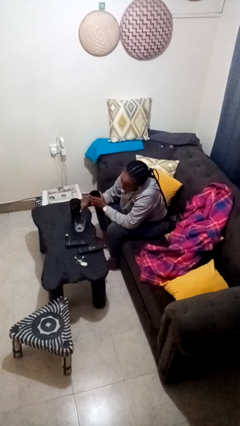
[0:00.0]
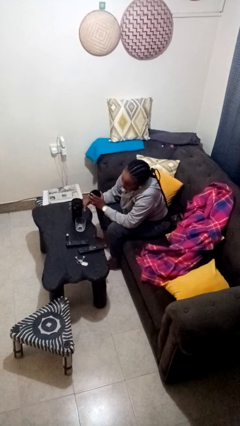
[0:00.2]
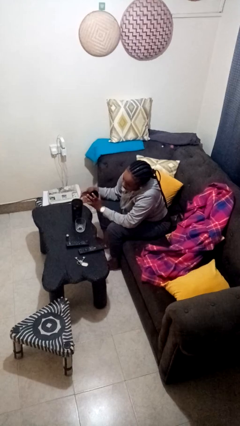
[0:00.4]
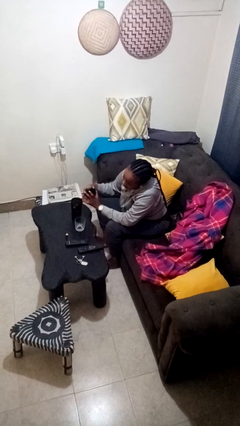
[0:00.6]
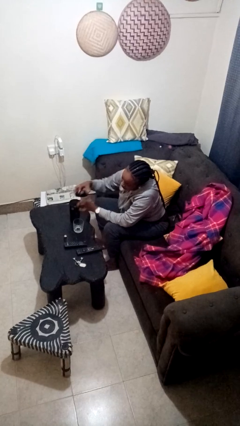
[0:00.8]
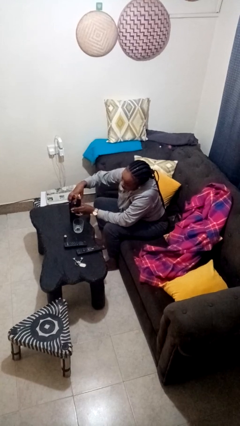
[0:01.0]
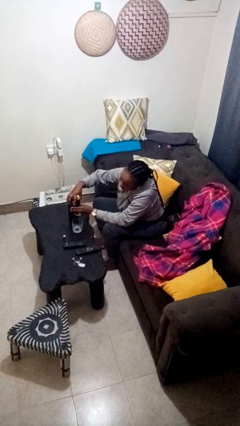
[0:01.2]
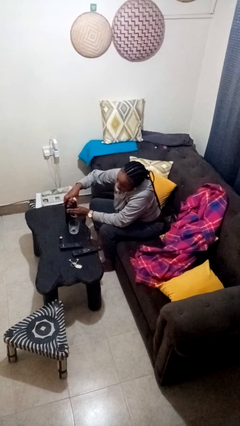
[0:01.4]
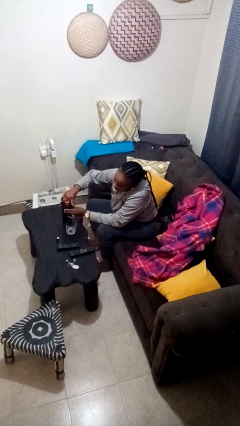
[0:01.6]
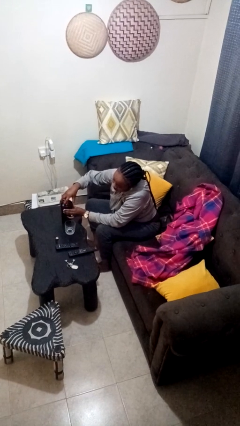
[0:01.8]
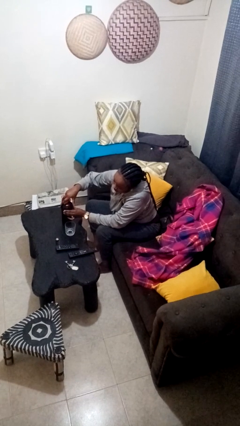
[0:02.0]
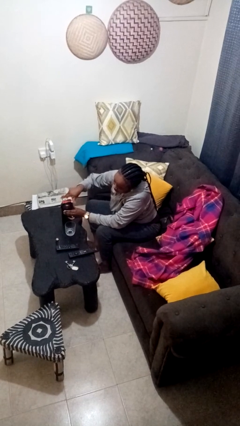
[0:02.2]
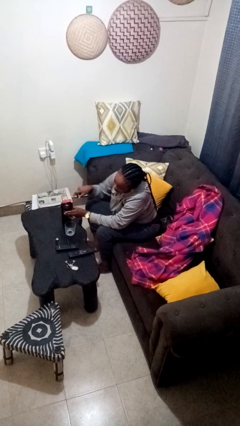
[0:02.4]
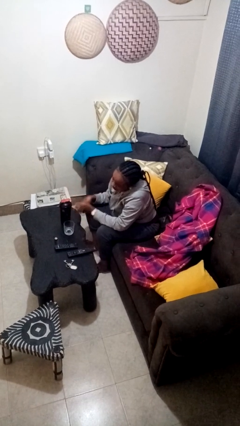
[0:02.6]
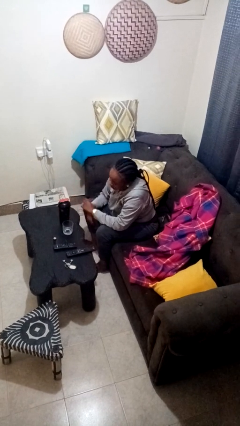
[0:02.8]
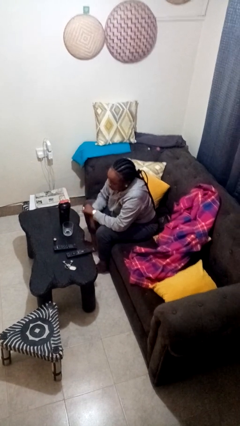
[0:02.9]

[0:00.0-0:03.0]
person screws lid to bottle

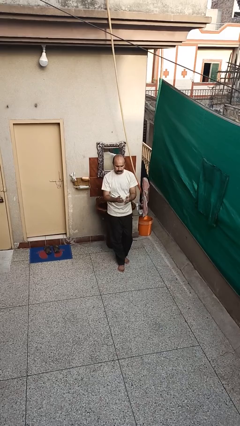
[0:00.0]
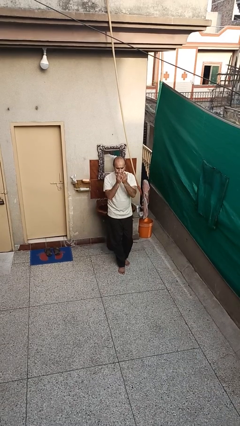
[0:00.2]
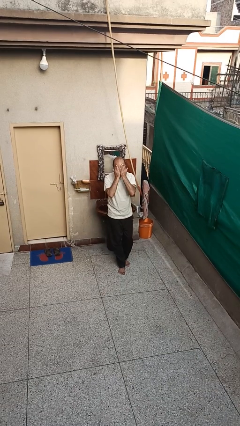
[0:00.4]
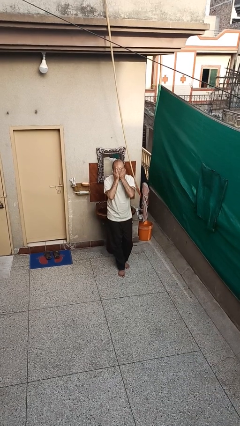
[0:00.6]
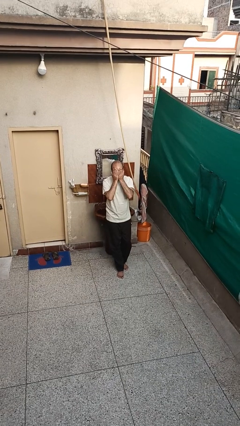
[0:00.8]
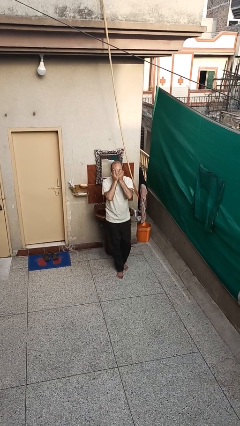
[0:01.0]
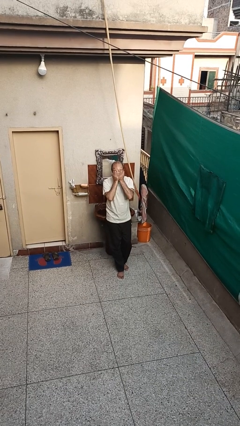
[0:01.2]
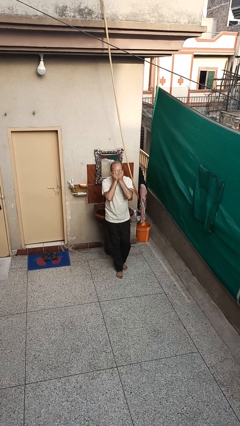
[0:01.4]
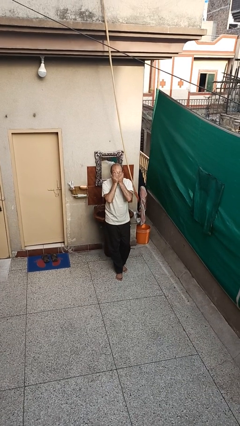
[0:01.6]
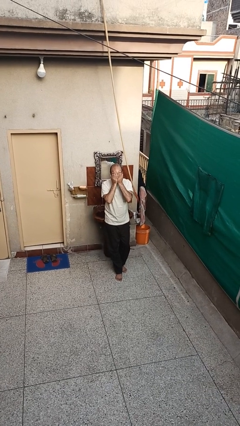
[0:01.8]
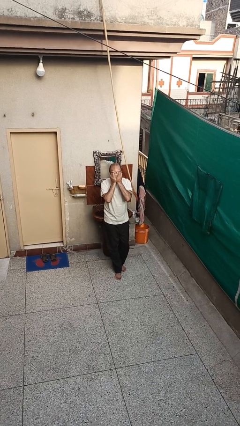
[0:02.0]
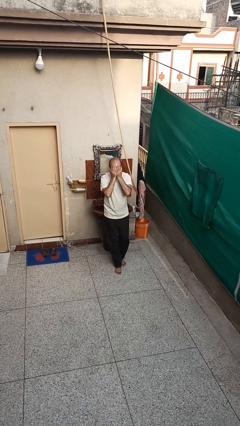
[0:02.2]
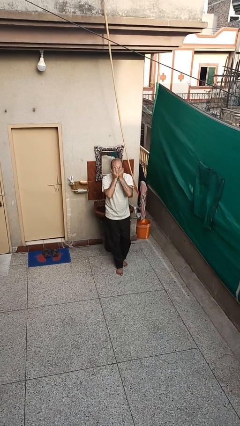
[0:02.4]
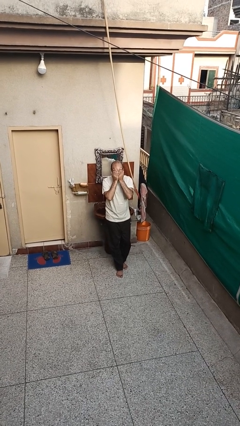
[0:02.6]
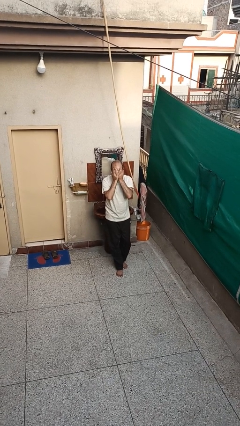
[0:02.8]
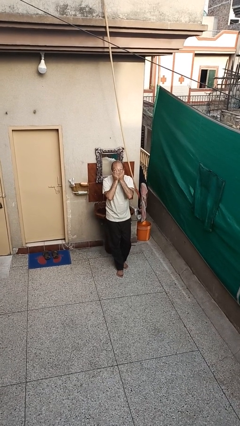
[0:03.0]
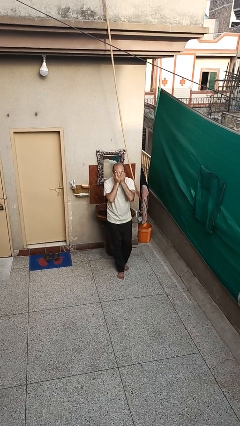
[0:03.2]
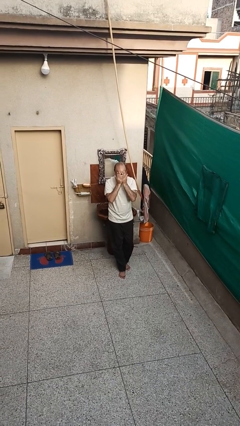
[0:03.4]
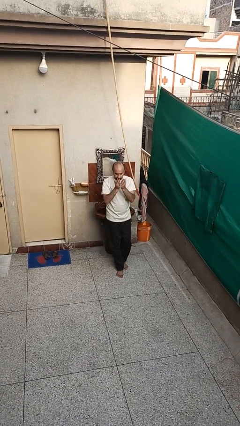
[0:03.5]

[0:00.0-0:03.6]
person covers face with hands

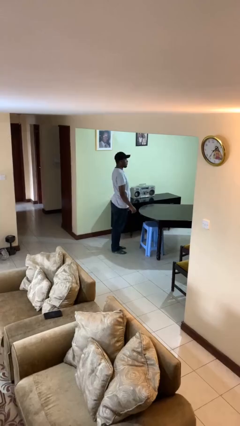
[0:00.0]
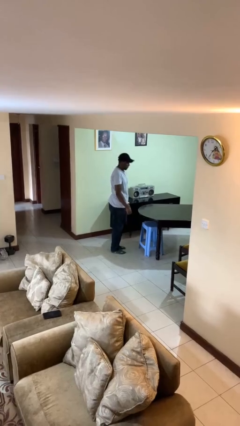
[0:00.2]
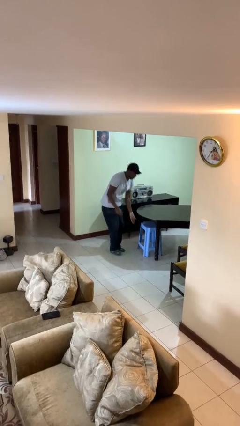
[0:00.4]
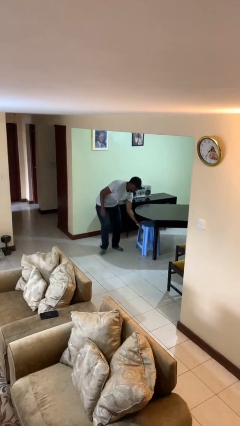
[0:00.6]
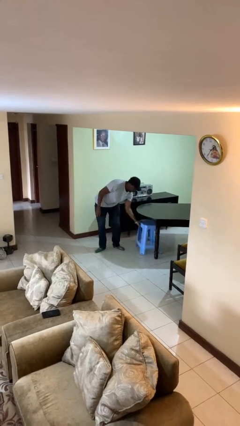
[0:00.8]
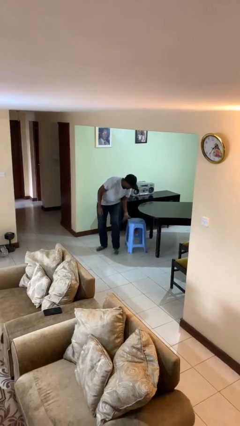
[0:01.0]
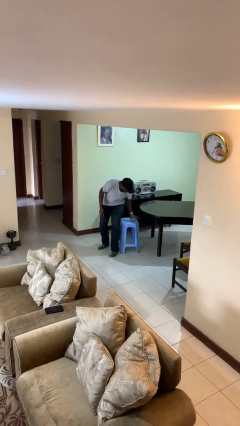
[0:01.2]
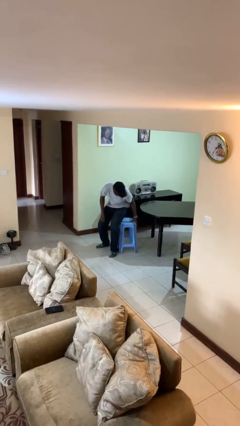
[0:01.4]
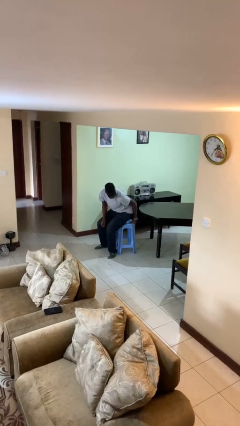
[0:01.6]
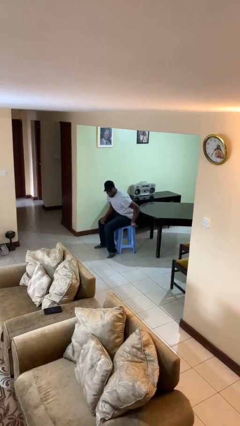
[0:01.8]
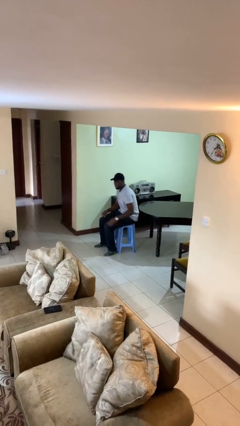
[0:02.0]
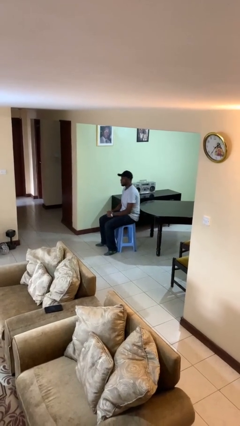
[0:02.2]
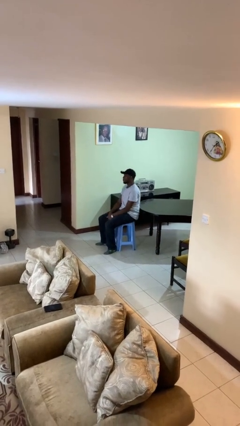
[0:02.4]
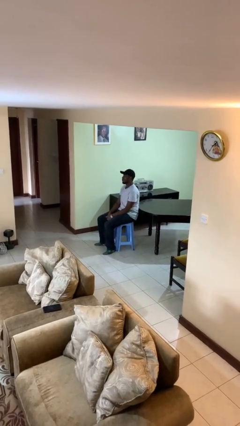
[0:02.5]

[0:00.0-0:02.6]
person sits down

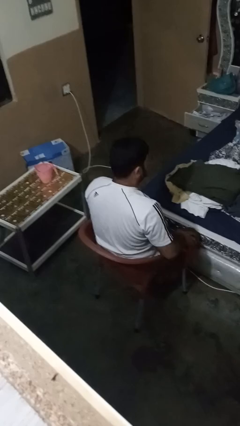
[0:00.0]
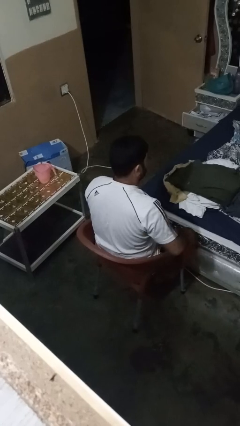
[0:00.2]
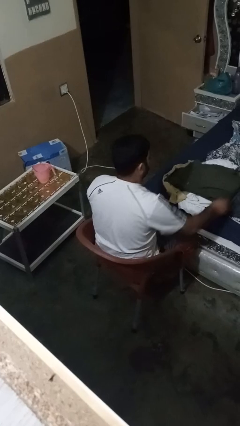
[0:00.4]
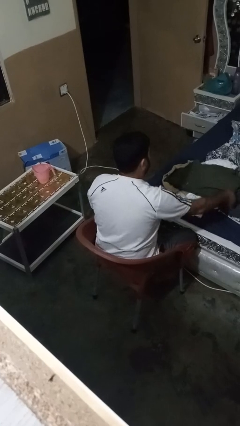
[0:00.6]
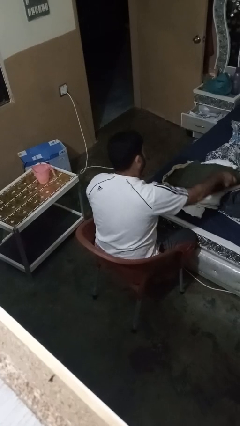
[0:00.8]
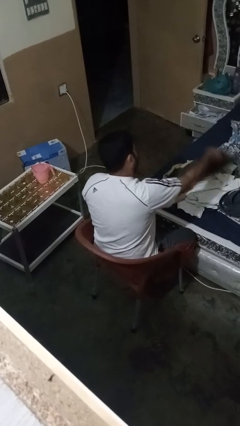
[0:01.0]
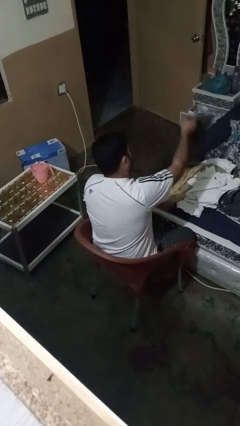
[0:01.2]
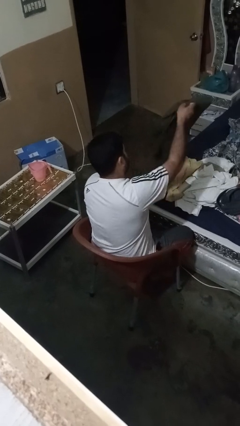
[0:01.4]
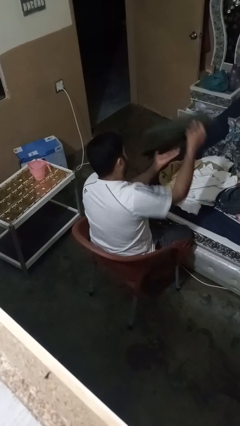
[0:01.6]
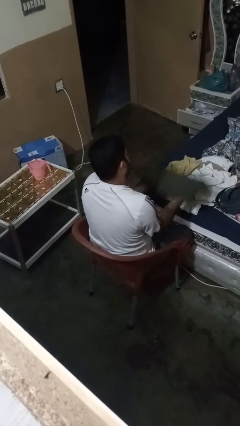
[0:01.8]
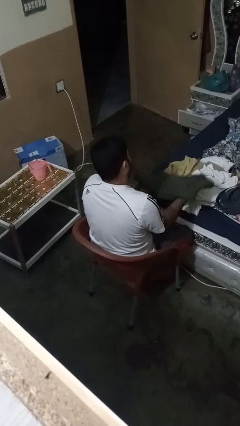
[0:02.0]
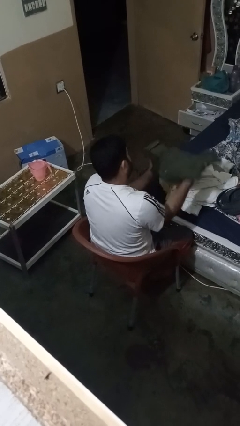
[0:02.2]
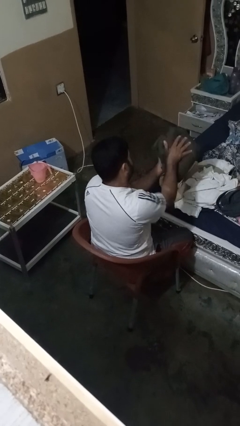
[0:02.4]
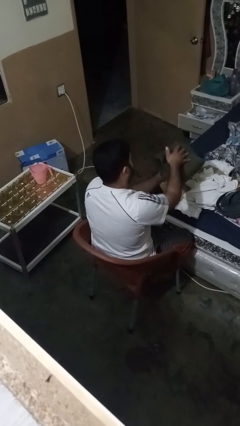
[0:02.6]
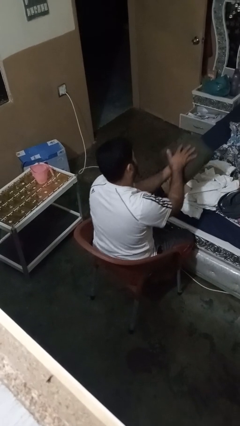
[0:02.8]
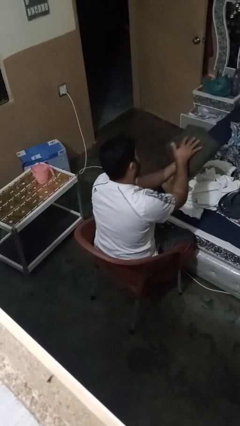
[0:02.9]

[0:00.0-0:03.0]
person folds pants

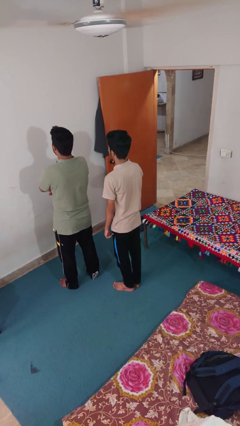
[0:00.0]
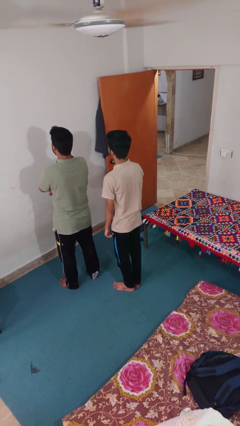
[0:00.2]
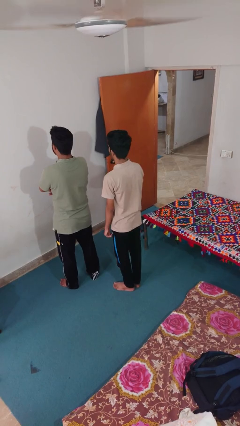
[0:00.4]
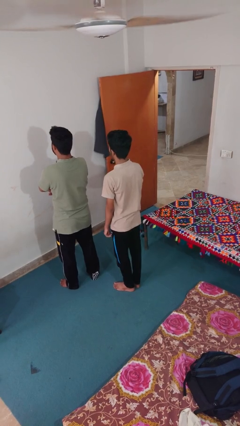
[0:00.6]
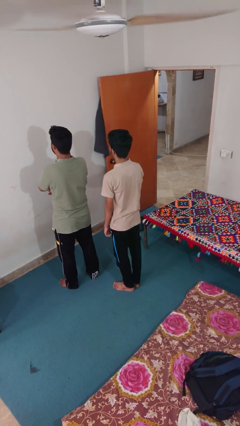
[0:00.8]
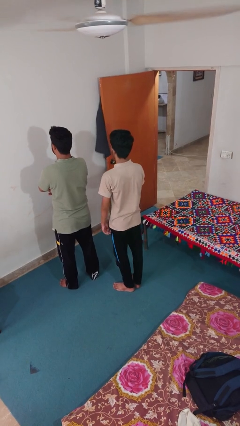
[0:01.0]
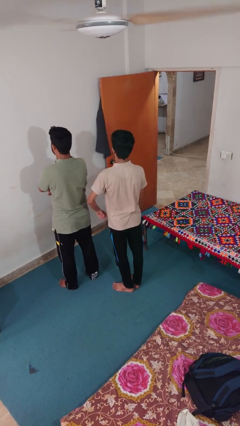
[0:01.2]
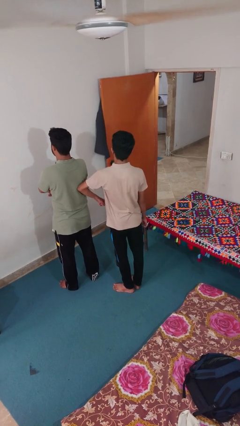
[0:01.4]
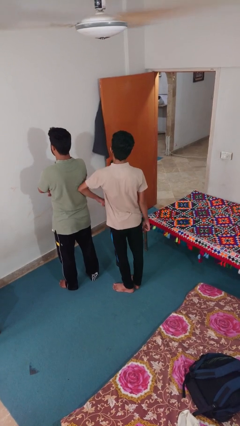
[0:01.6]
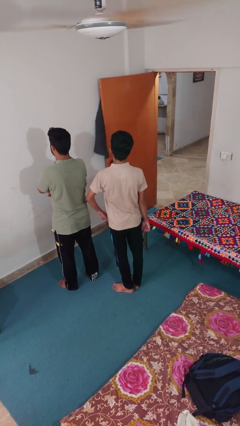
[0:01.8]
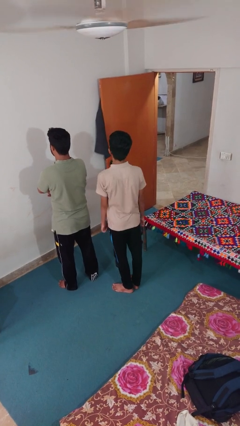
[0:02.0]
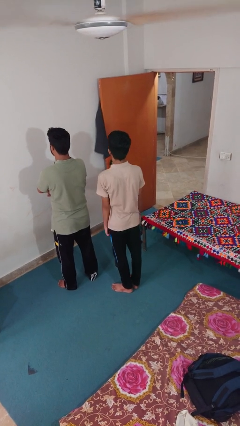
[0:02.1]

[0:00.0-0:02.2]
person nudges person with elbow

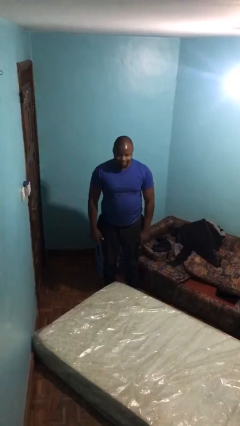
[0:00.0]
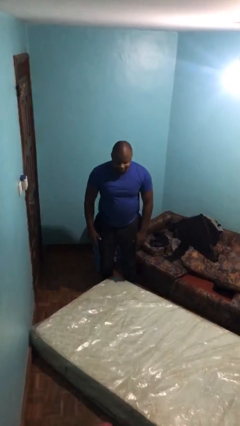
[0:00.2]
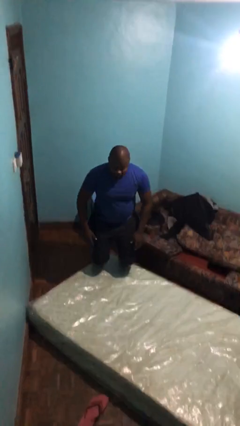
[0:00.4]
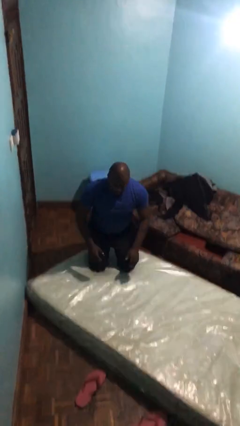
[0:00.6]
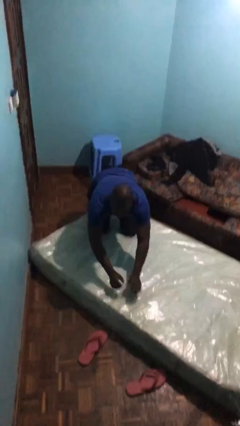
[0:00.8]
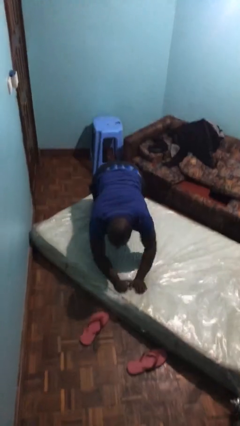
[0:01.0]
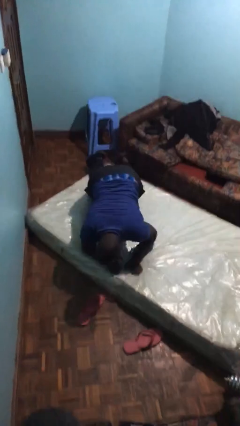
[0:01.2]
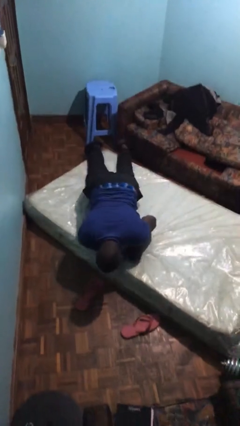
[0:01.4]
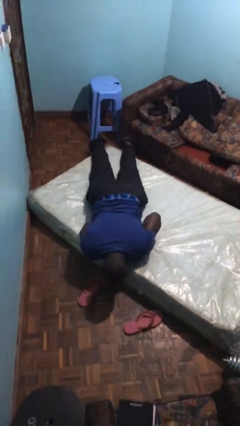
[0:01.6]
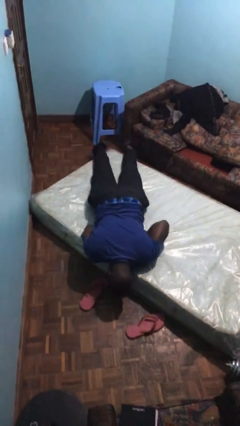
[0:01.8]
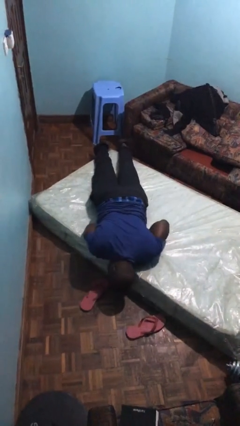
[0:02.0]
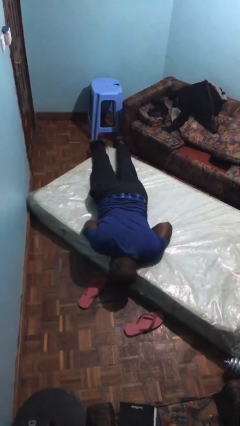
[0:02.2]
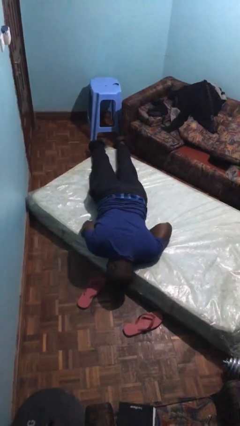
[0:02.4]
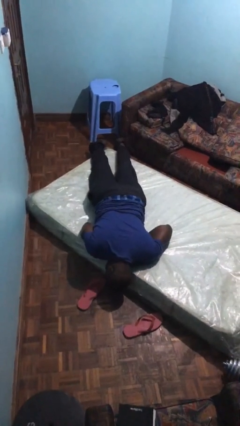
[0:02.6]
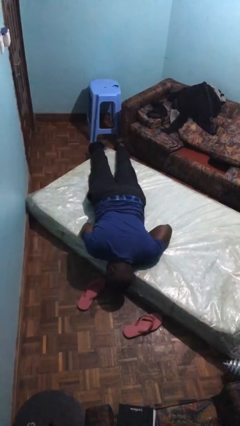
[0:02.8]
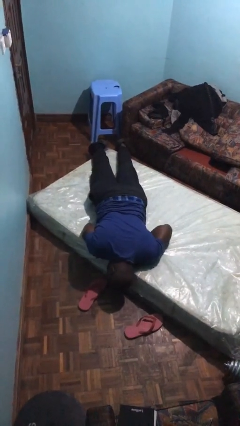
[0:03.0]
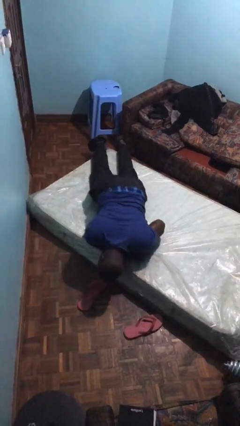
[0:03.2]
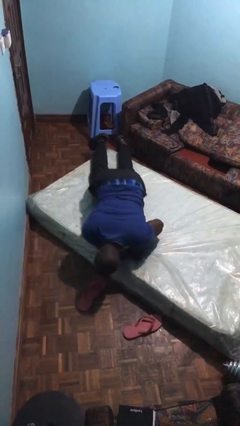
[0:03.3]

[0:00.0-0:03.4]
person lies down on bed
